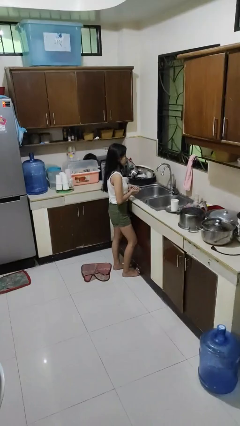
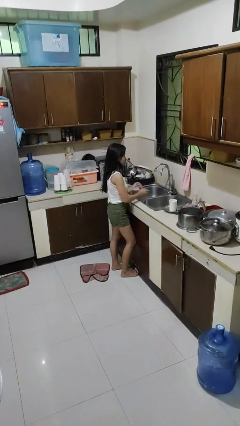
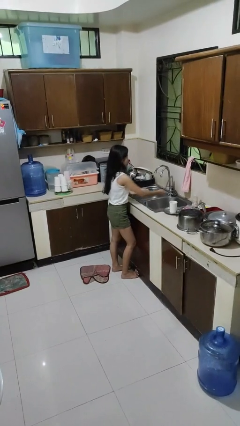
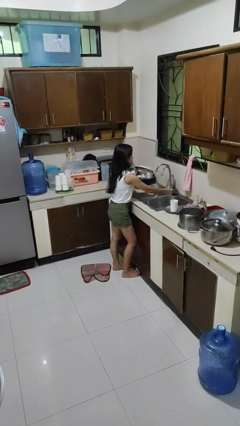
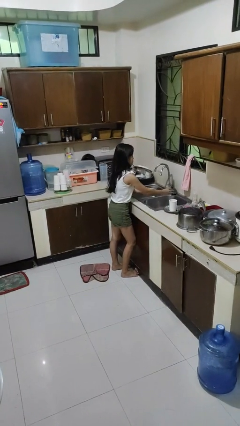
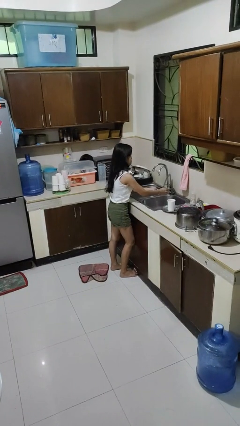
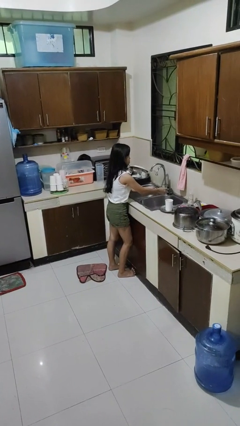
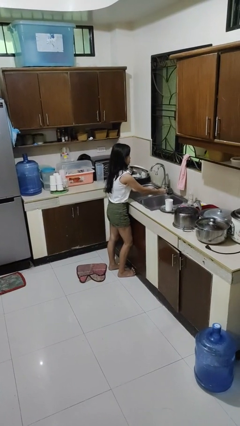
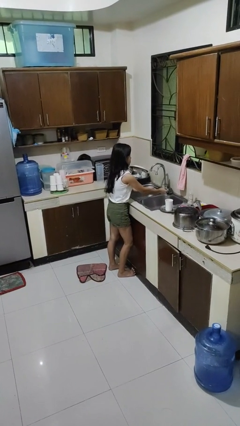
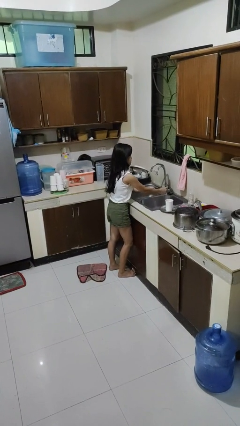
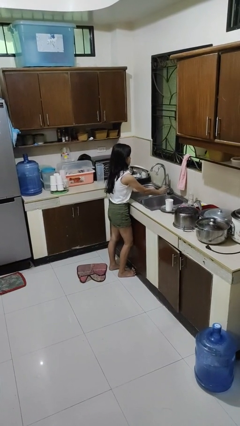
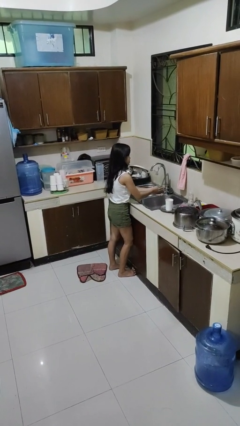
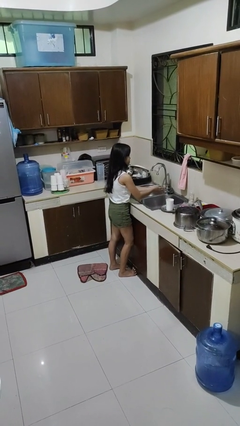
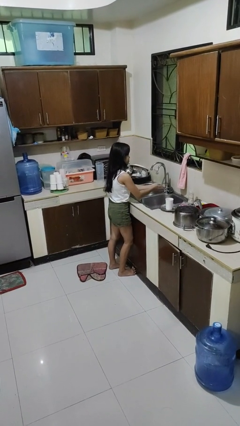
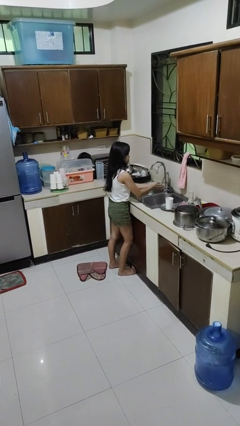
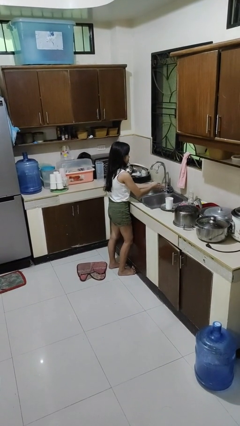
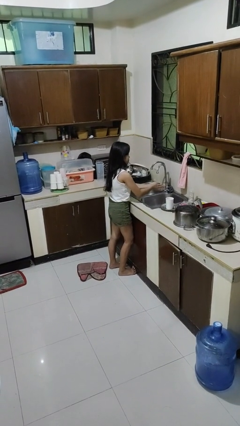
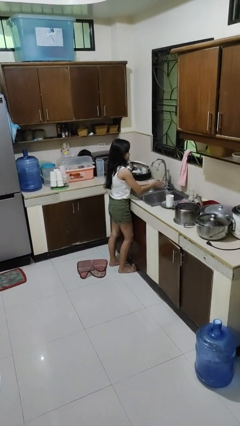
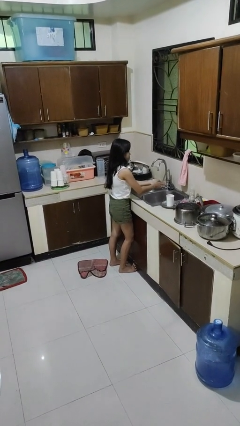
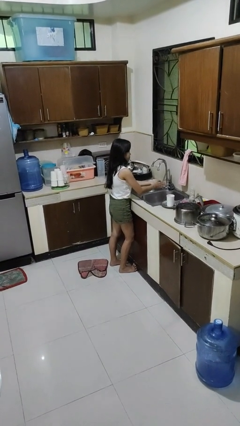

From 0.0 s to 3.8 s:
person washes hands

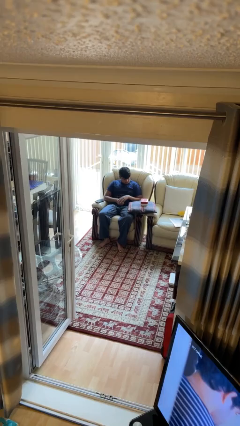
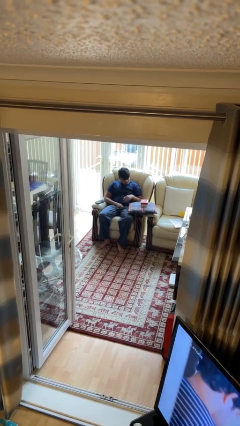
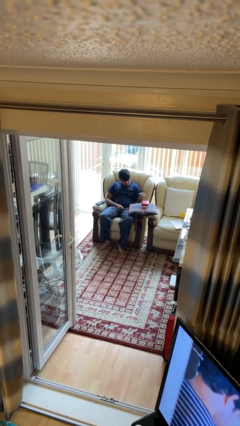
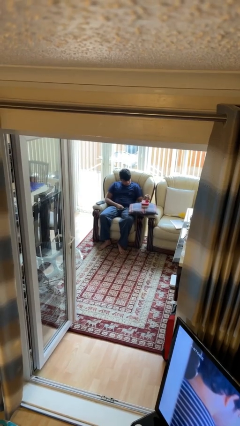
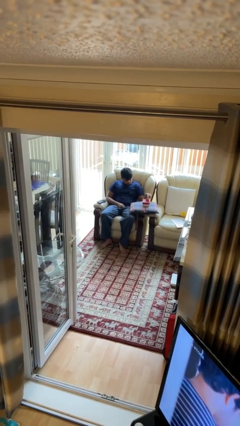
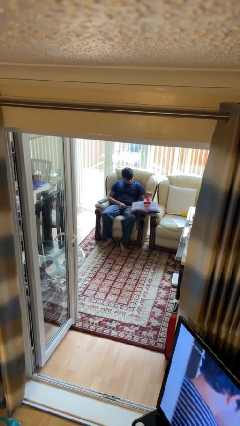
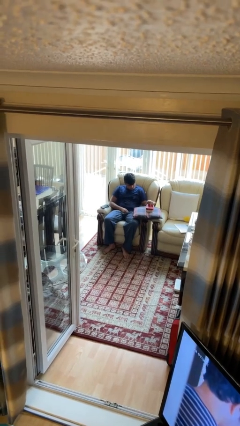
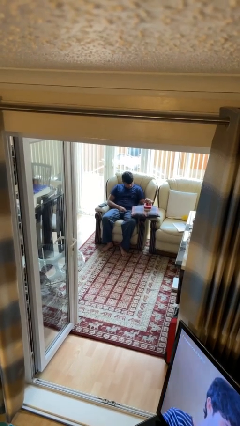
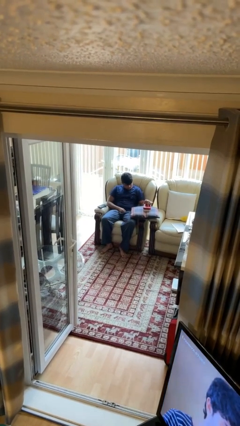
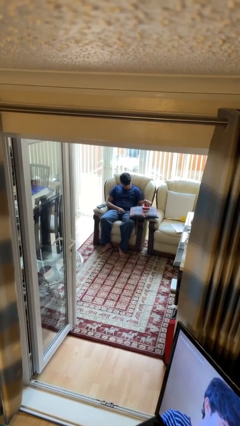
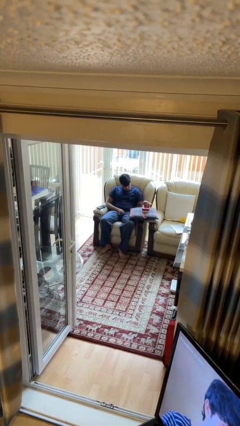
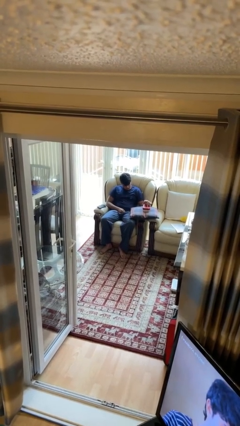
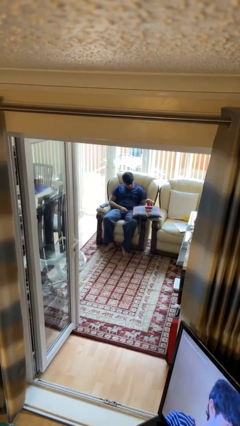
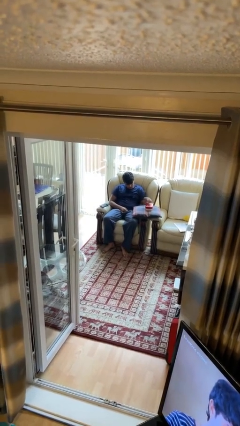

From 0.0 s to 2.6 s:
person taps object with finger

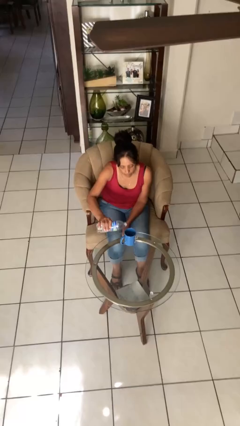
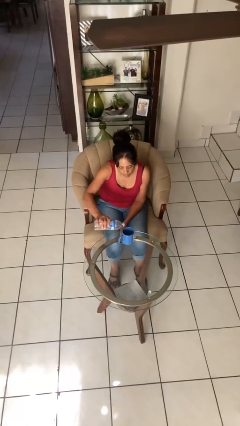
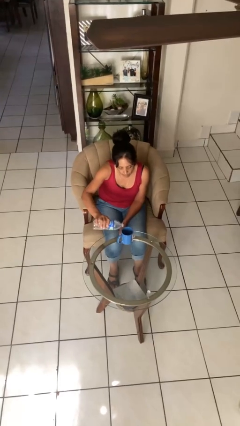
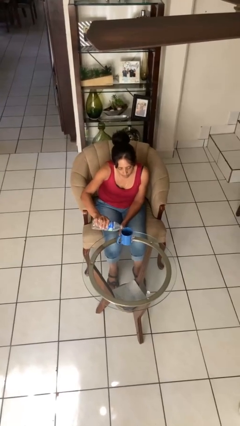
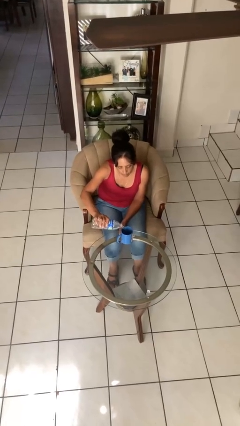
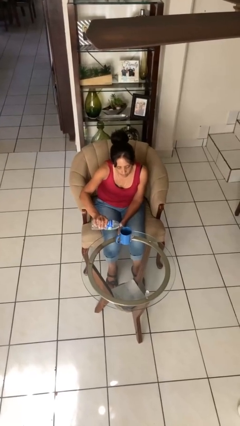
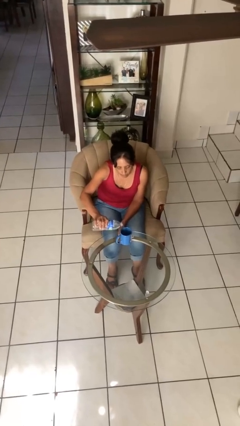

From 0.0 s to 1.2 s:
person pours liquid into cup

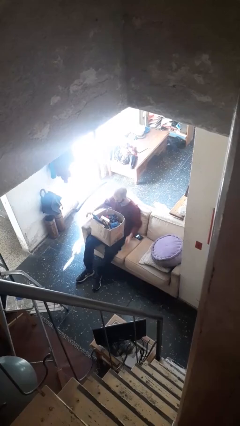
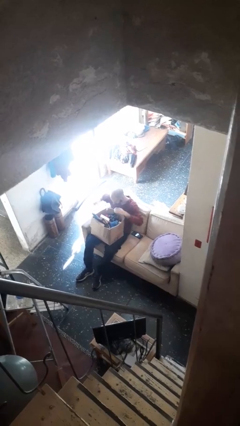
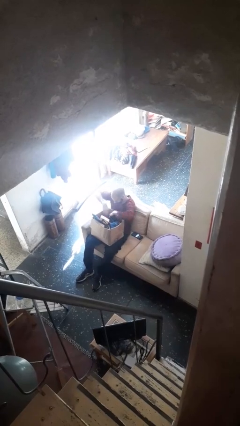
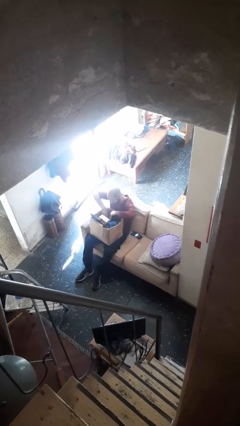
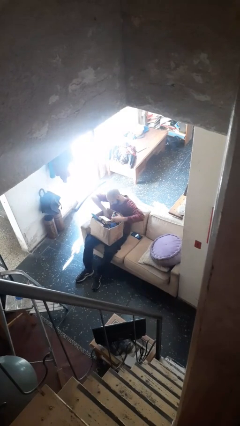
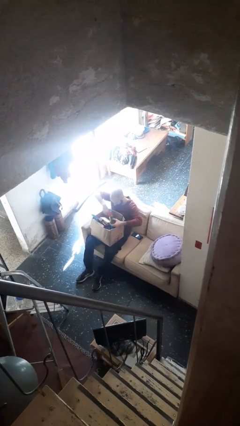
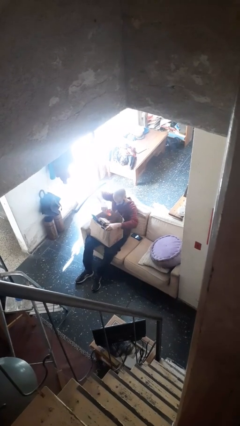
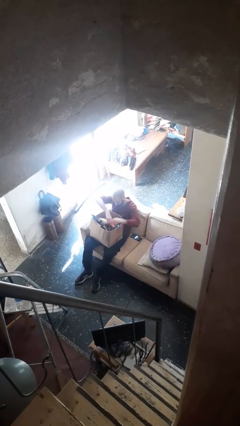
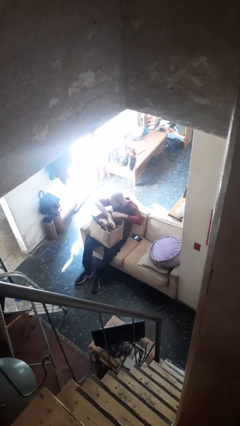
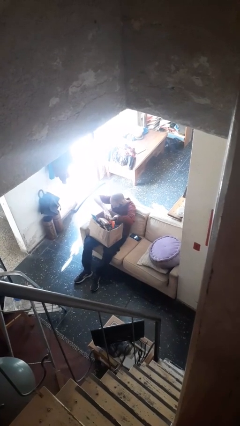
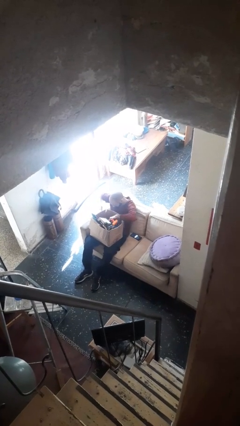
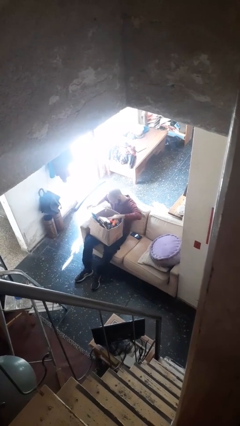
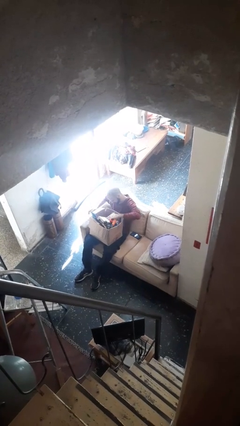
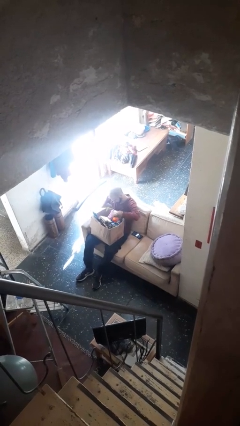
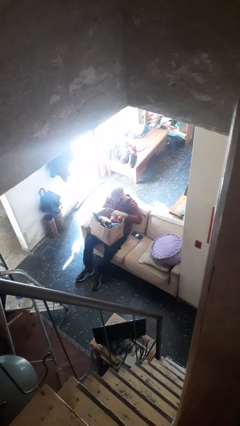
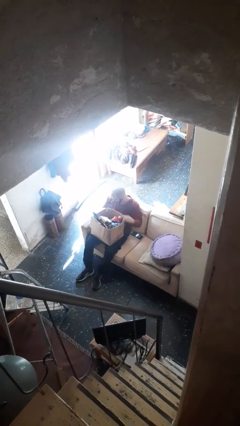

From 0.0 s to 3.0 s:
person searches in box

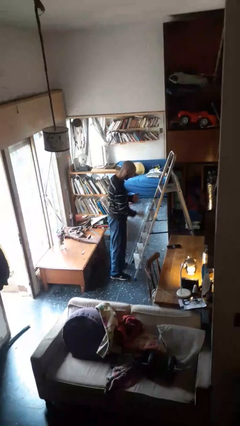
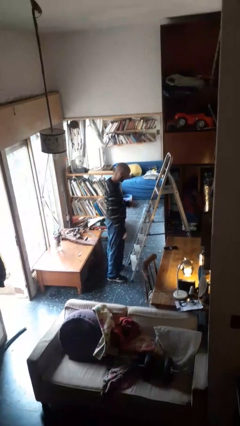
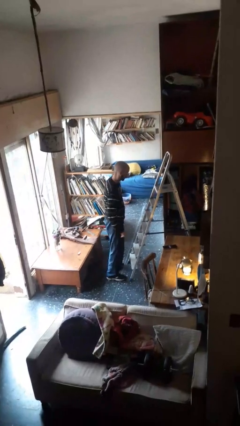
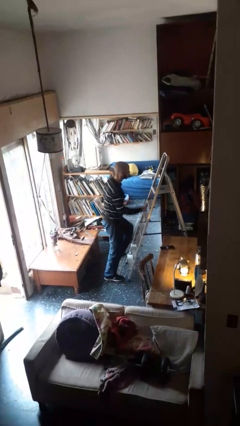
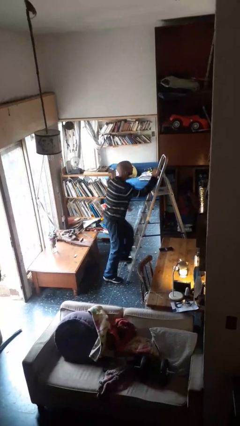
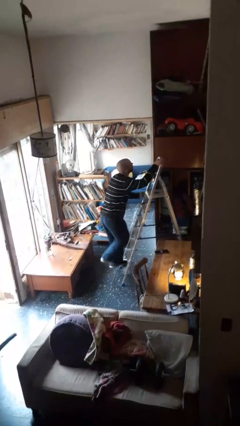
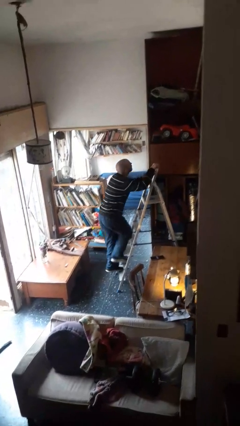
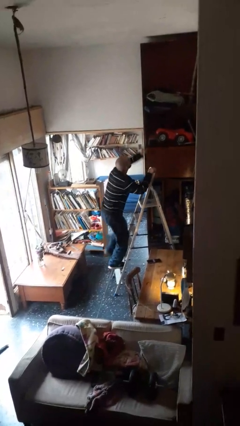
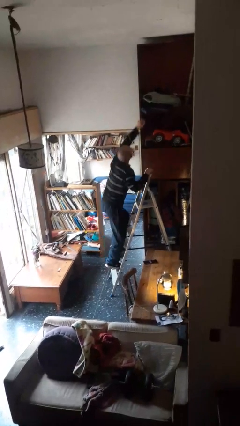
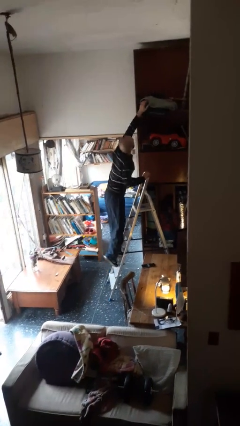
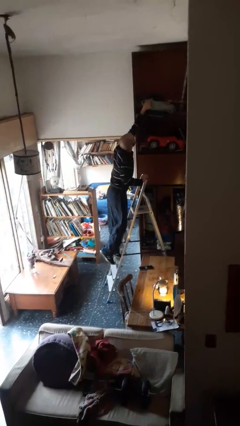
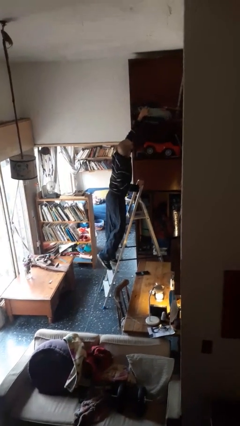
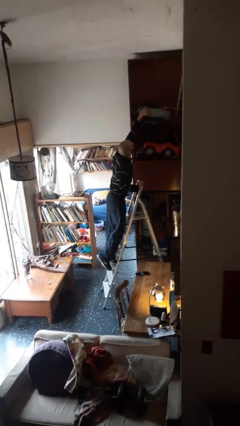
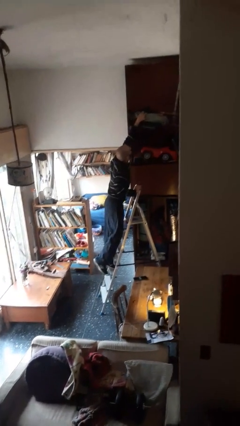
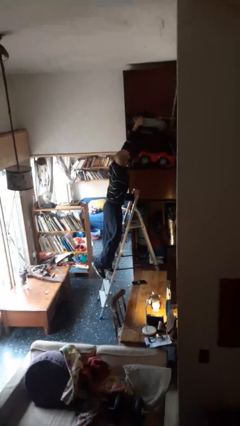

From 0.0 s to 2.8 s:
person climbs up ladder

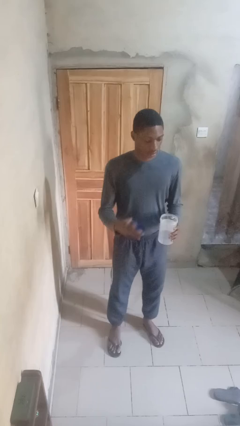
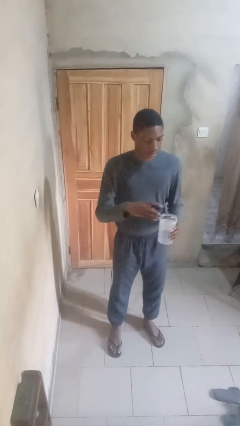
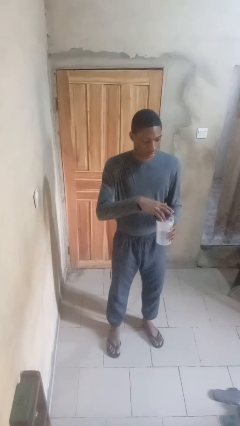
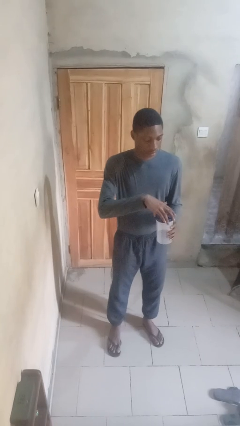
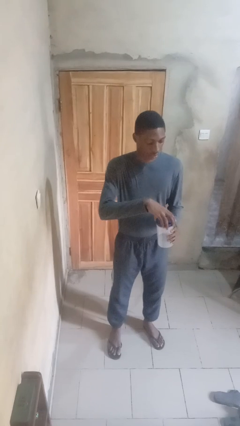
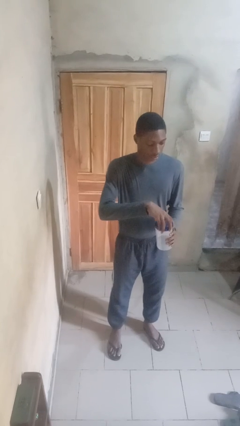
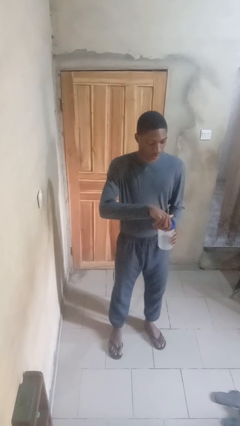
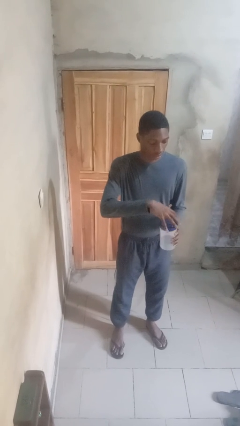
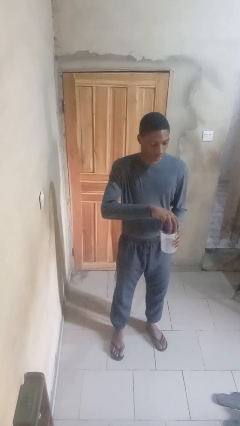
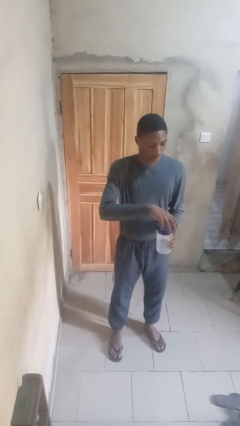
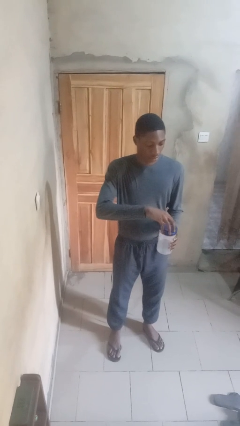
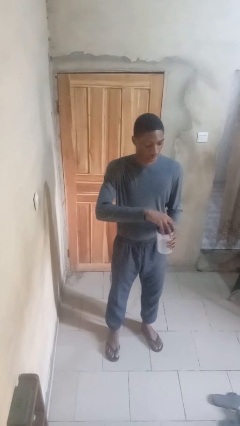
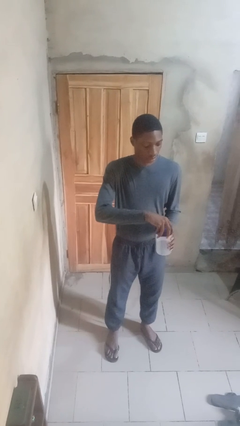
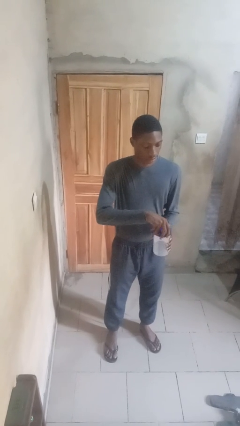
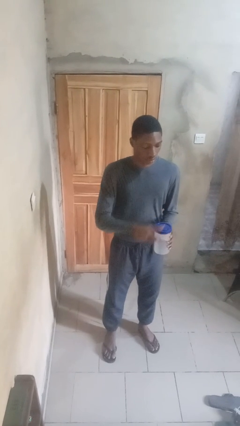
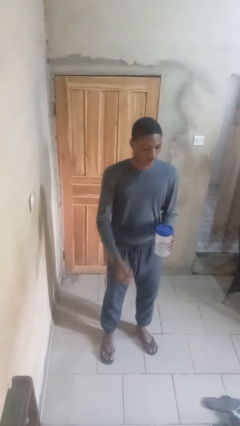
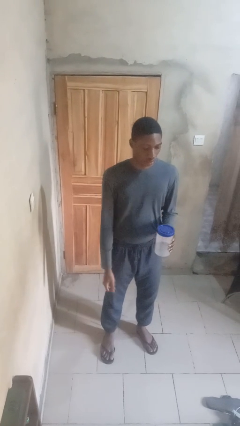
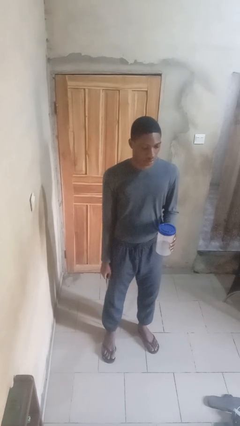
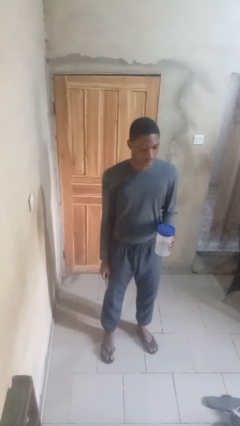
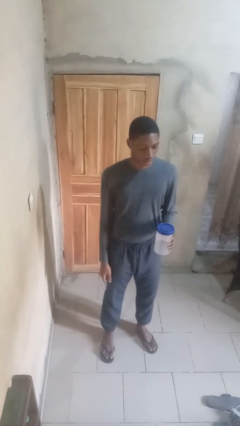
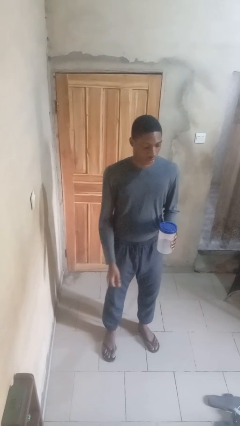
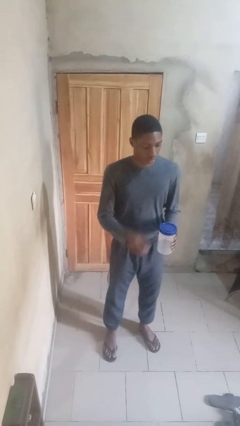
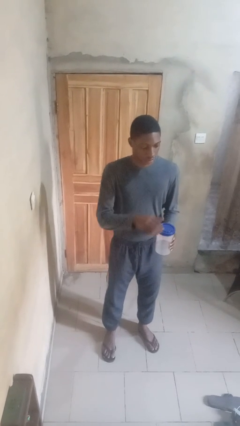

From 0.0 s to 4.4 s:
person closes jar
